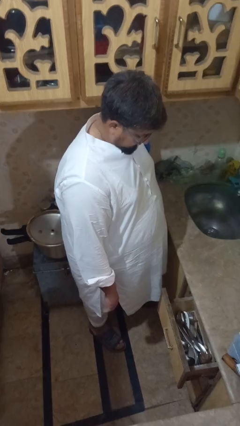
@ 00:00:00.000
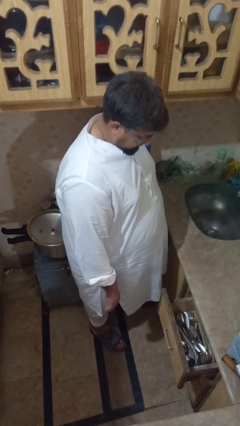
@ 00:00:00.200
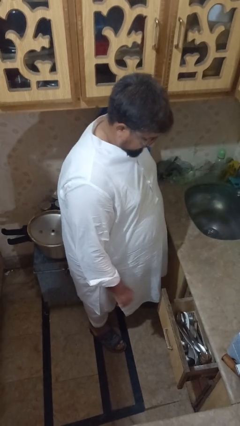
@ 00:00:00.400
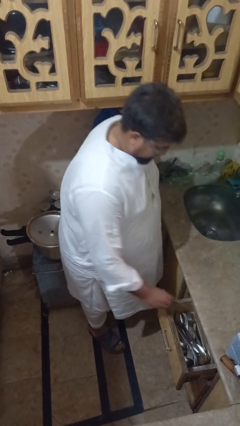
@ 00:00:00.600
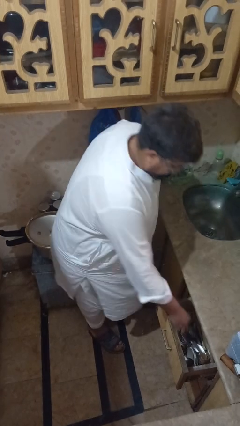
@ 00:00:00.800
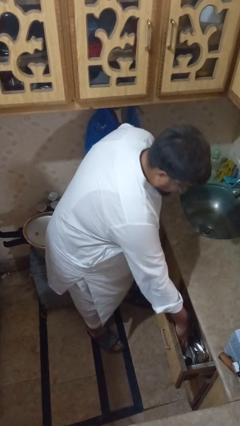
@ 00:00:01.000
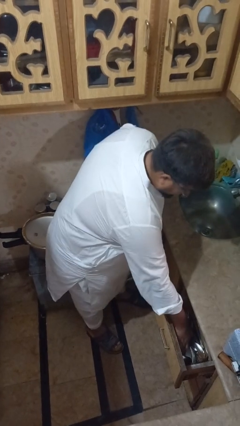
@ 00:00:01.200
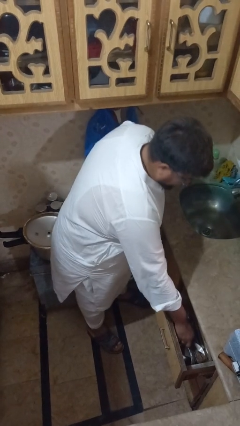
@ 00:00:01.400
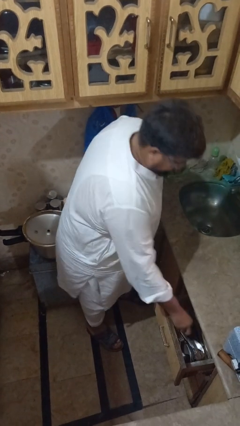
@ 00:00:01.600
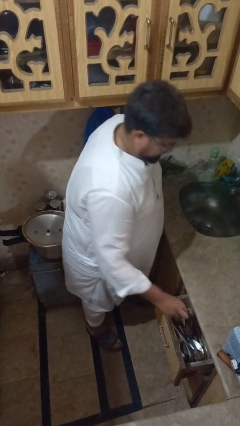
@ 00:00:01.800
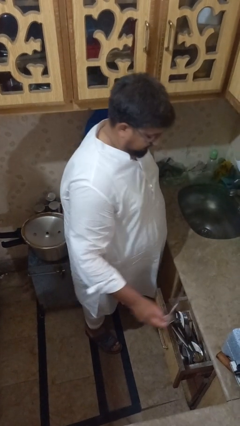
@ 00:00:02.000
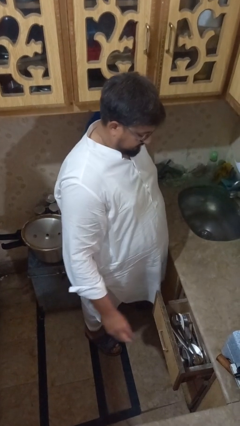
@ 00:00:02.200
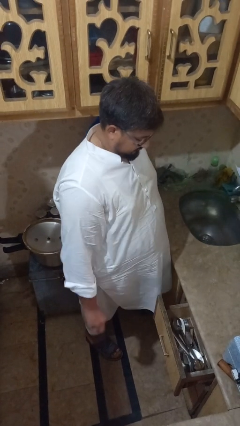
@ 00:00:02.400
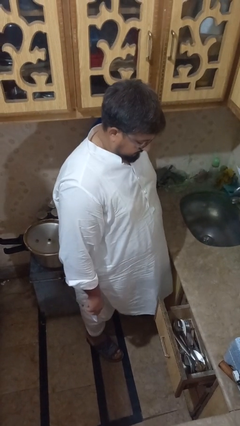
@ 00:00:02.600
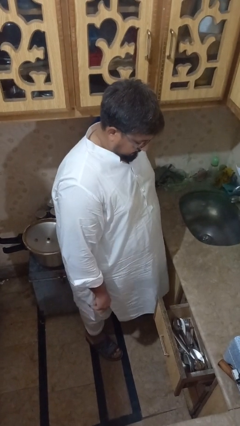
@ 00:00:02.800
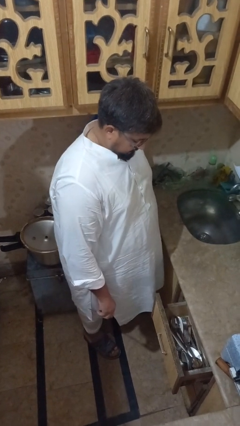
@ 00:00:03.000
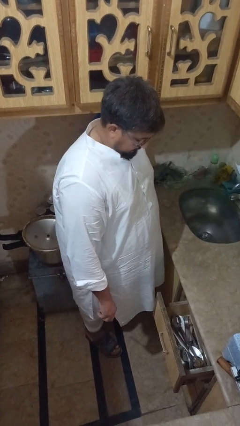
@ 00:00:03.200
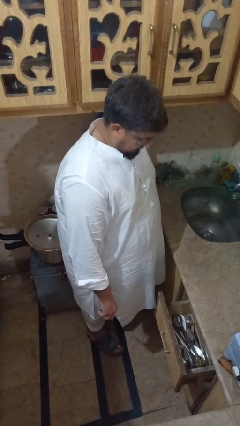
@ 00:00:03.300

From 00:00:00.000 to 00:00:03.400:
person takes object from kitchen drawer

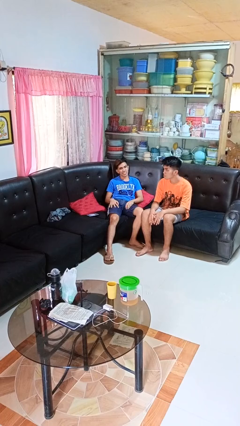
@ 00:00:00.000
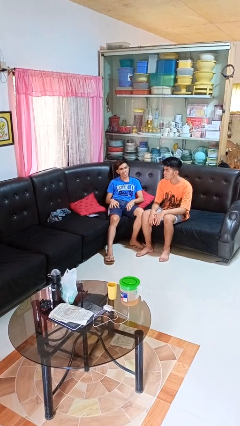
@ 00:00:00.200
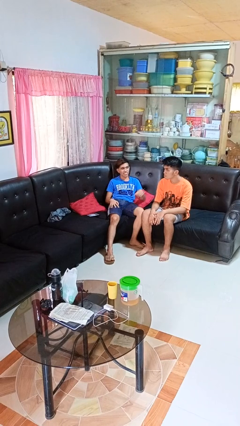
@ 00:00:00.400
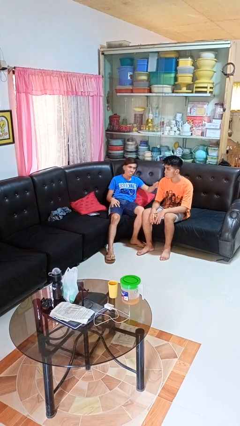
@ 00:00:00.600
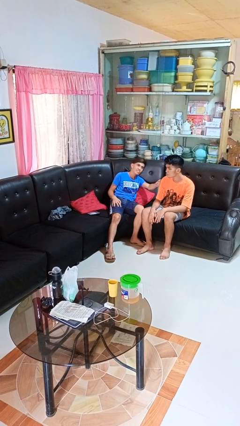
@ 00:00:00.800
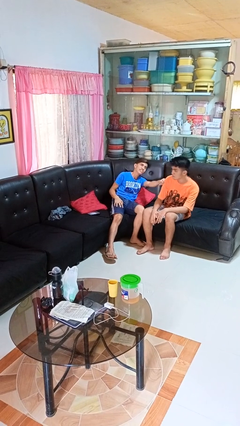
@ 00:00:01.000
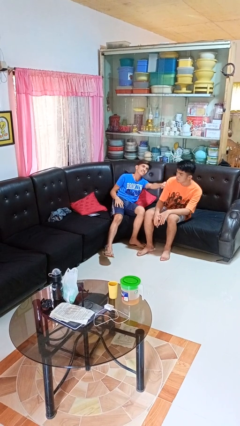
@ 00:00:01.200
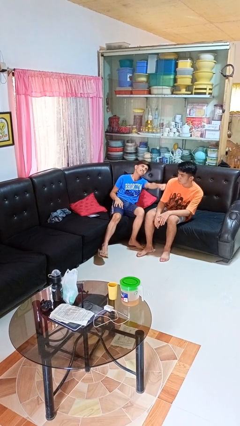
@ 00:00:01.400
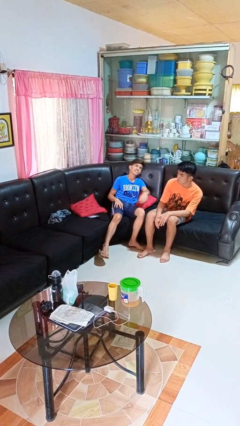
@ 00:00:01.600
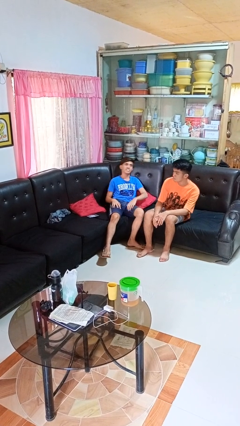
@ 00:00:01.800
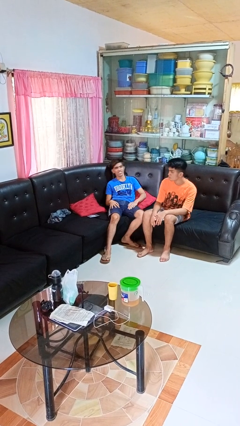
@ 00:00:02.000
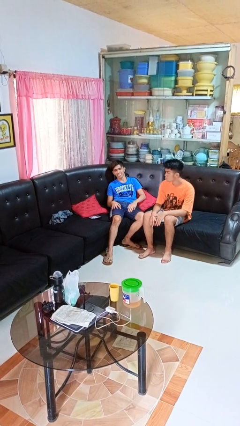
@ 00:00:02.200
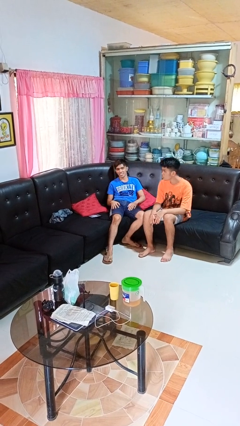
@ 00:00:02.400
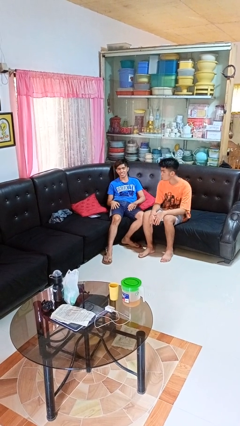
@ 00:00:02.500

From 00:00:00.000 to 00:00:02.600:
person pounds shoulders of person

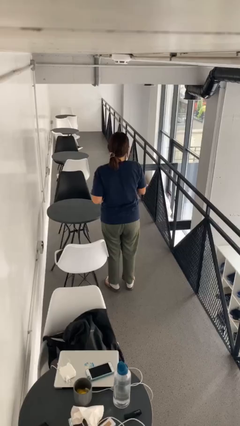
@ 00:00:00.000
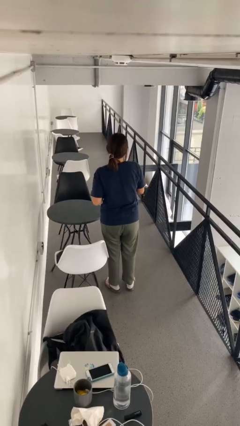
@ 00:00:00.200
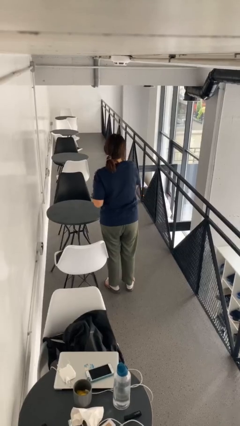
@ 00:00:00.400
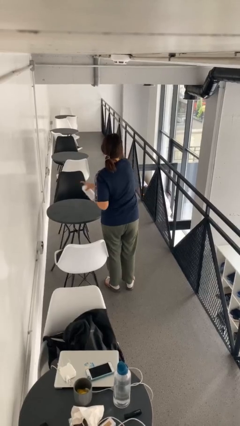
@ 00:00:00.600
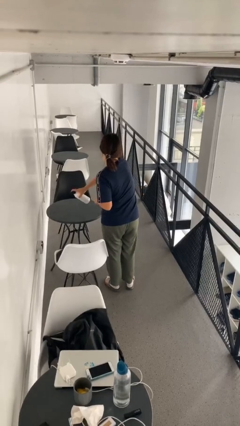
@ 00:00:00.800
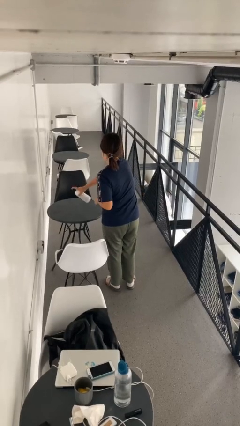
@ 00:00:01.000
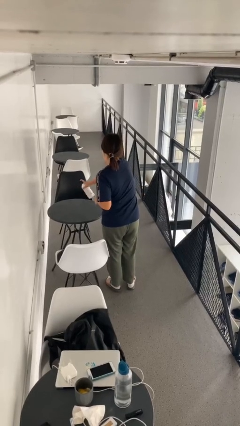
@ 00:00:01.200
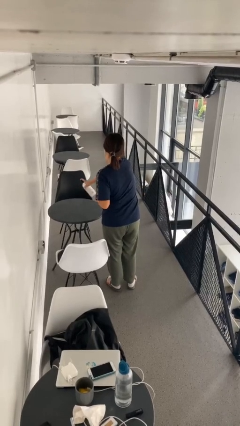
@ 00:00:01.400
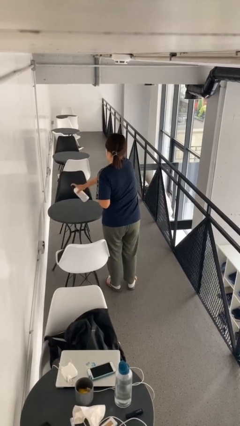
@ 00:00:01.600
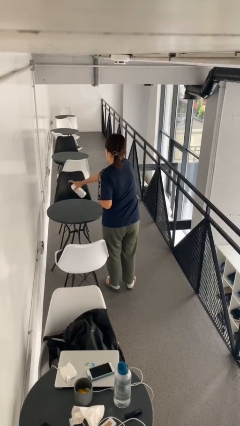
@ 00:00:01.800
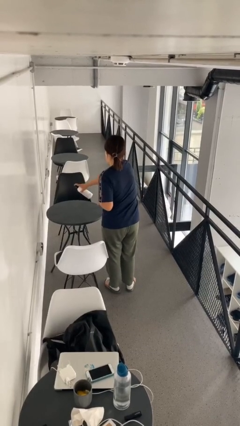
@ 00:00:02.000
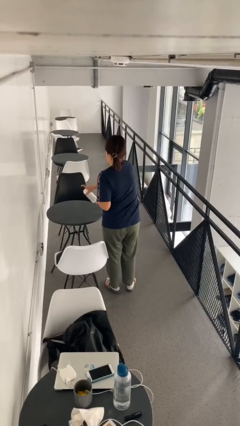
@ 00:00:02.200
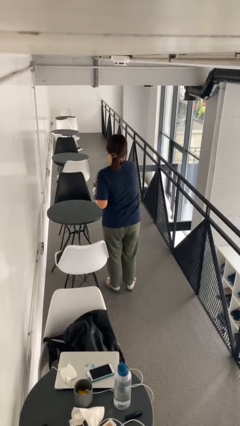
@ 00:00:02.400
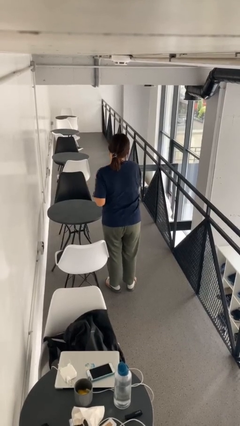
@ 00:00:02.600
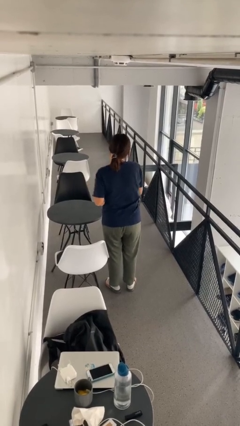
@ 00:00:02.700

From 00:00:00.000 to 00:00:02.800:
person sprays from bottle

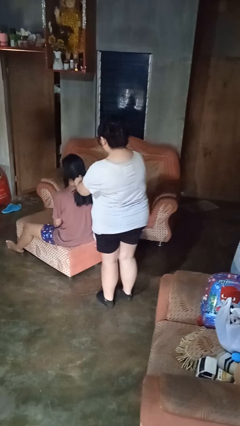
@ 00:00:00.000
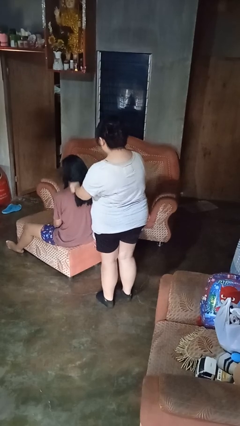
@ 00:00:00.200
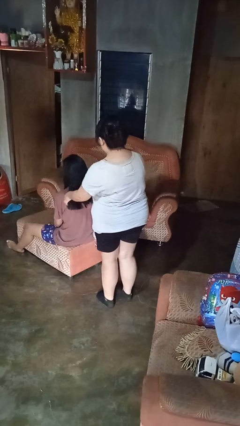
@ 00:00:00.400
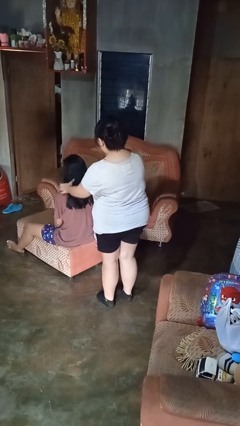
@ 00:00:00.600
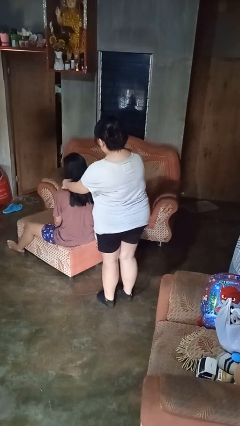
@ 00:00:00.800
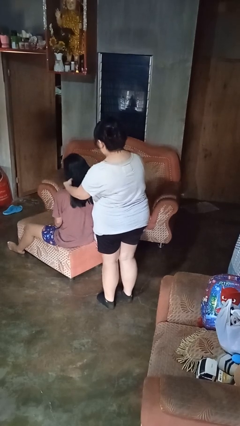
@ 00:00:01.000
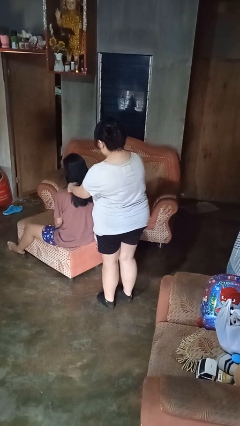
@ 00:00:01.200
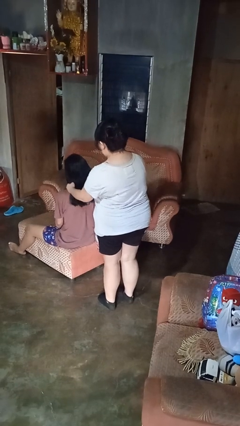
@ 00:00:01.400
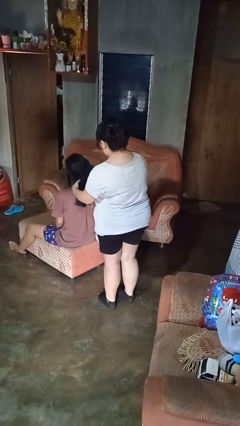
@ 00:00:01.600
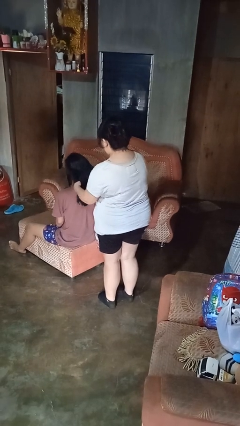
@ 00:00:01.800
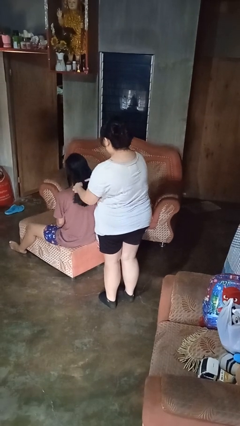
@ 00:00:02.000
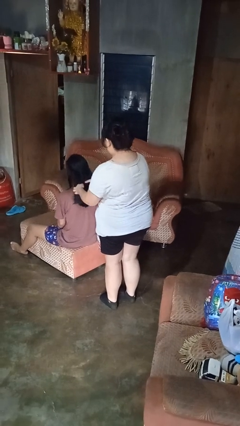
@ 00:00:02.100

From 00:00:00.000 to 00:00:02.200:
person braids hair of person

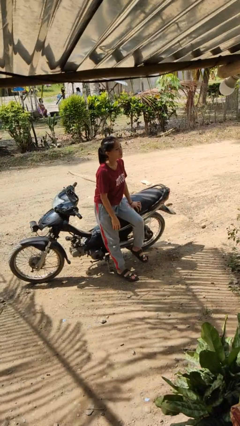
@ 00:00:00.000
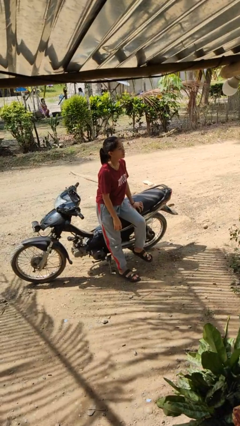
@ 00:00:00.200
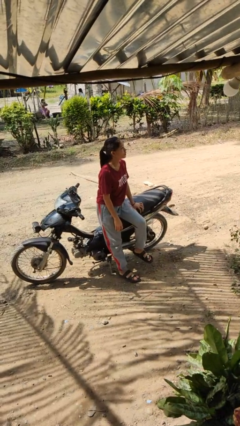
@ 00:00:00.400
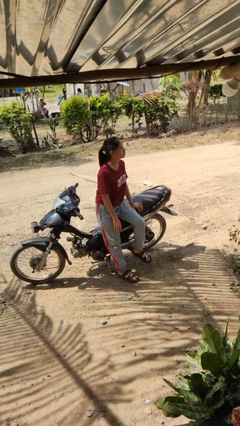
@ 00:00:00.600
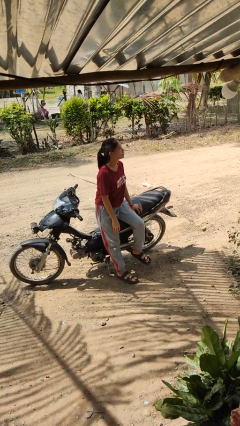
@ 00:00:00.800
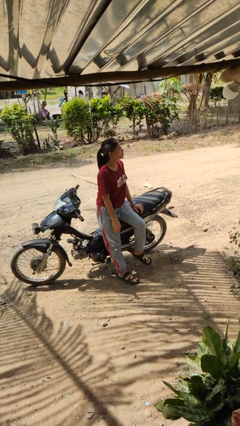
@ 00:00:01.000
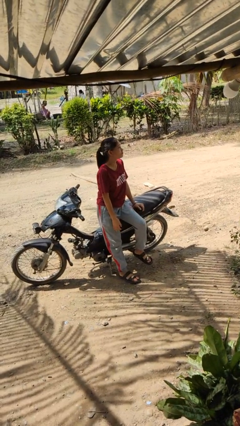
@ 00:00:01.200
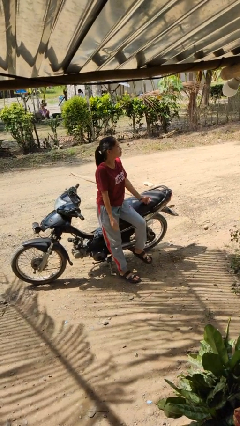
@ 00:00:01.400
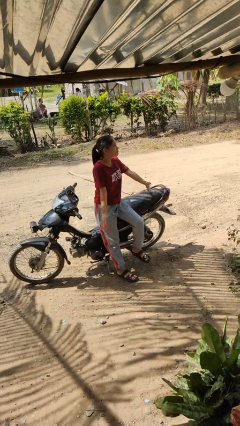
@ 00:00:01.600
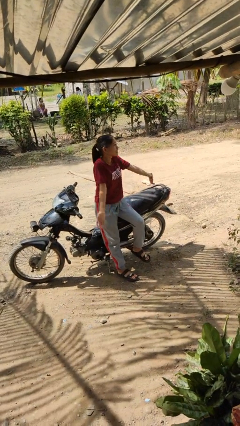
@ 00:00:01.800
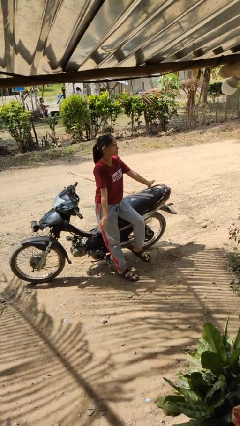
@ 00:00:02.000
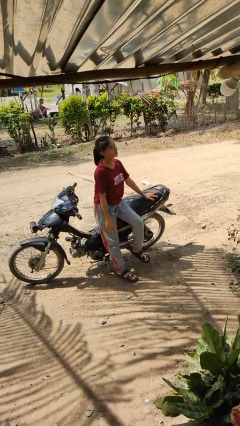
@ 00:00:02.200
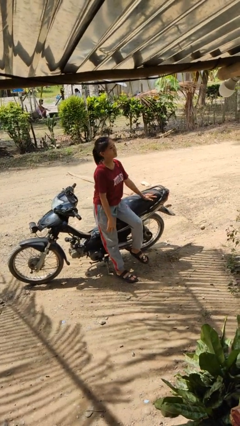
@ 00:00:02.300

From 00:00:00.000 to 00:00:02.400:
person shrugs

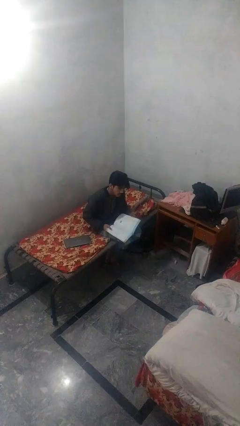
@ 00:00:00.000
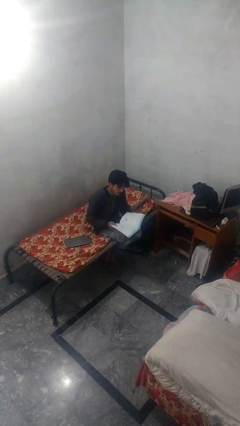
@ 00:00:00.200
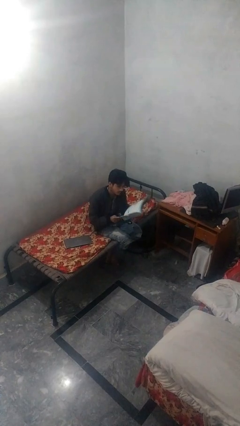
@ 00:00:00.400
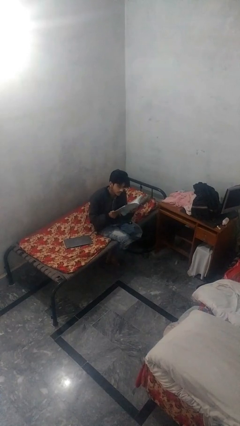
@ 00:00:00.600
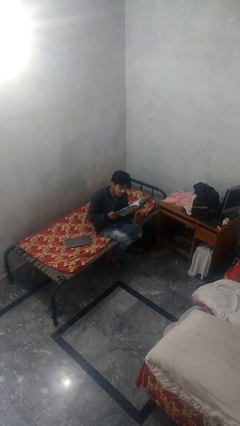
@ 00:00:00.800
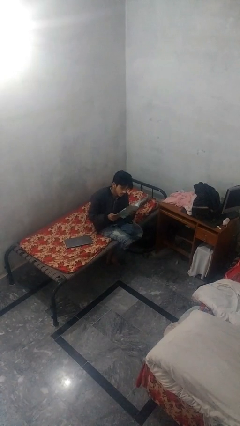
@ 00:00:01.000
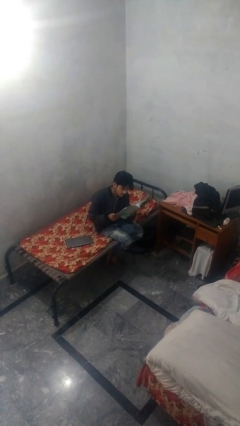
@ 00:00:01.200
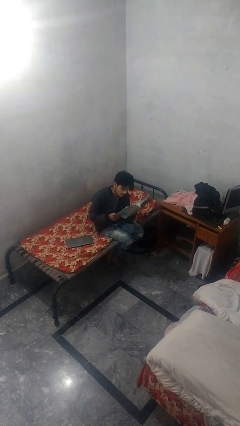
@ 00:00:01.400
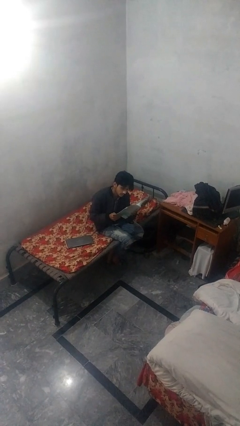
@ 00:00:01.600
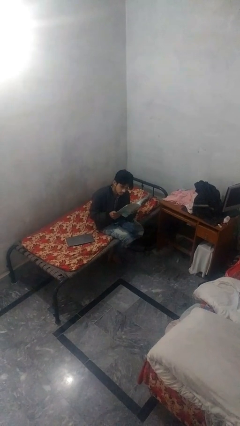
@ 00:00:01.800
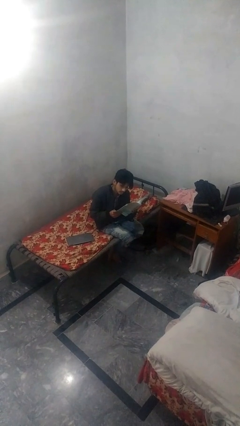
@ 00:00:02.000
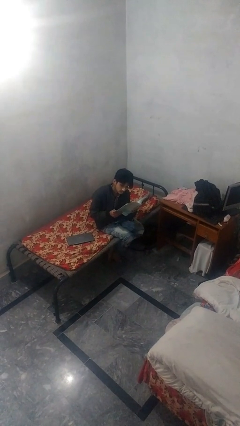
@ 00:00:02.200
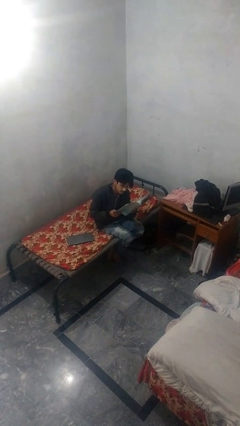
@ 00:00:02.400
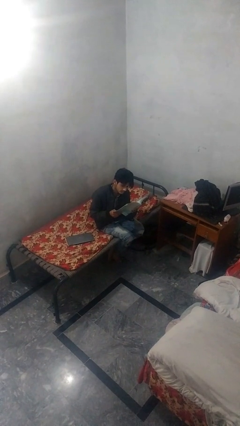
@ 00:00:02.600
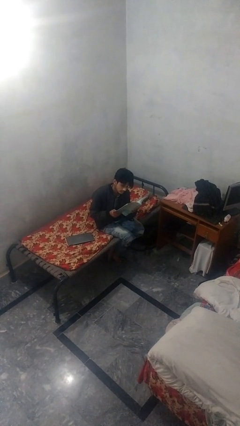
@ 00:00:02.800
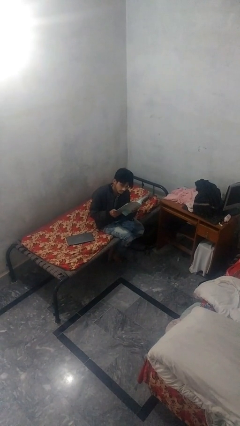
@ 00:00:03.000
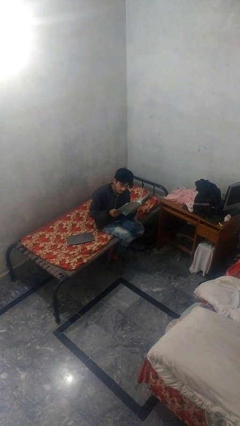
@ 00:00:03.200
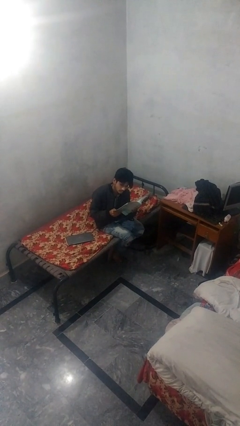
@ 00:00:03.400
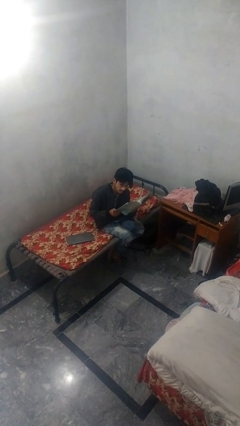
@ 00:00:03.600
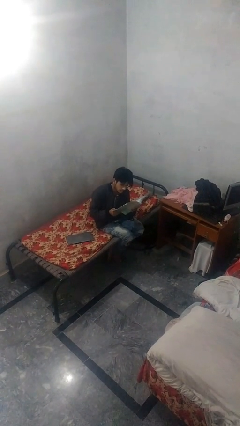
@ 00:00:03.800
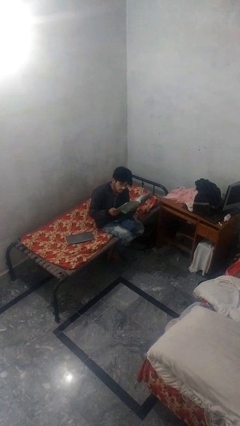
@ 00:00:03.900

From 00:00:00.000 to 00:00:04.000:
person reads document
